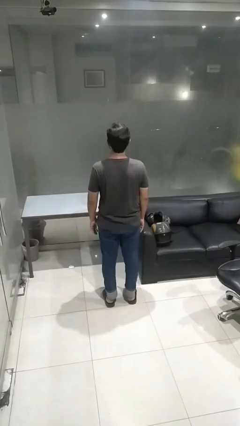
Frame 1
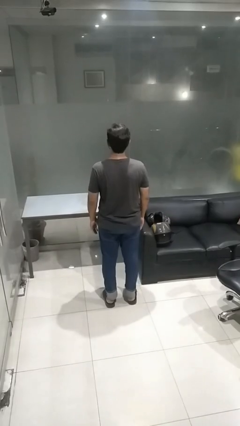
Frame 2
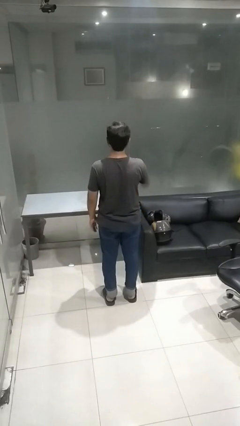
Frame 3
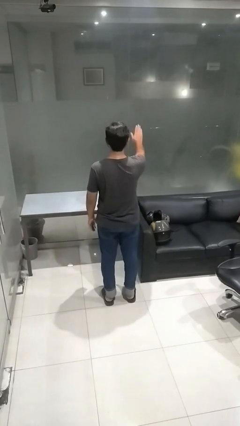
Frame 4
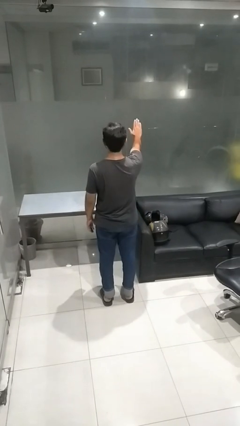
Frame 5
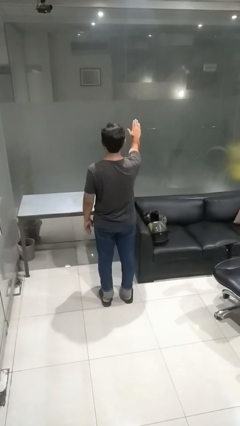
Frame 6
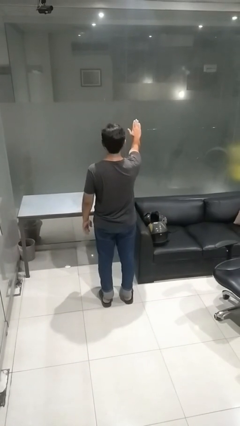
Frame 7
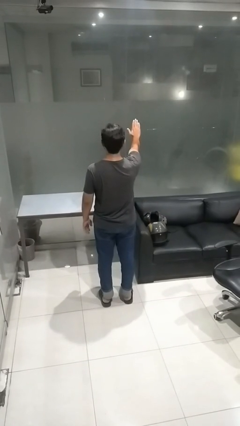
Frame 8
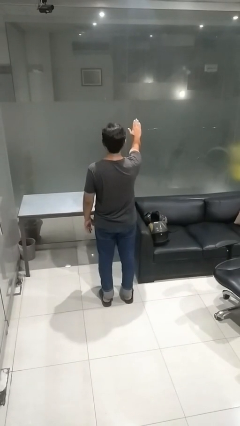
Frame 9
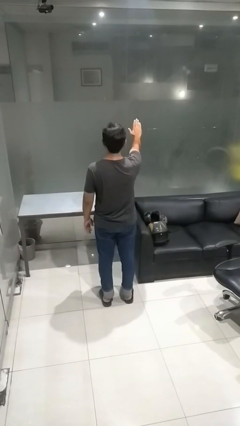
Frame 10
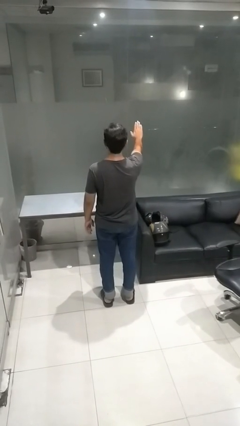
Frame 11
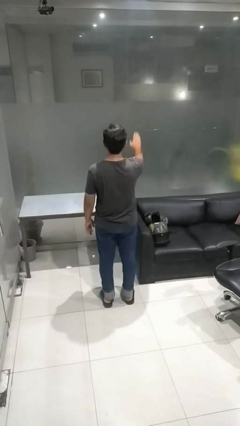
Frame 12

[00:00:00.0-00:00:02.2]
person gestures stop

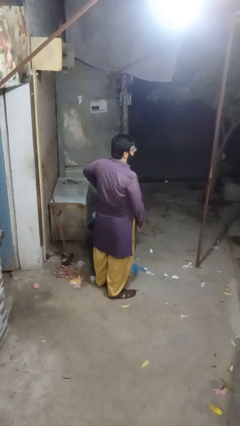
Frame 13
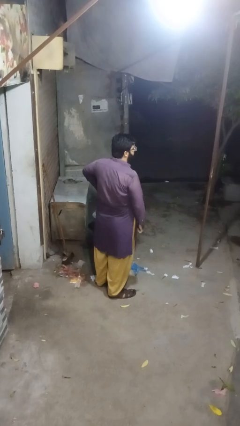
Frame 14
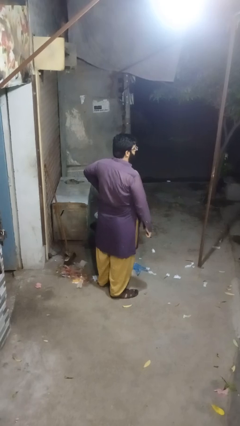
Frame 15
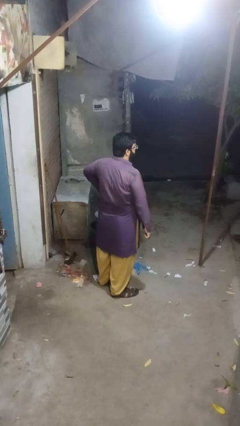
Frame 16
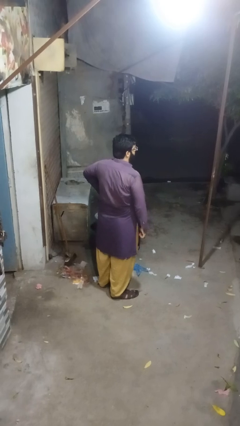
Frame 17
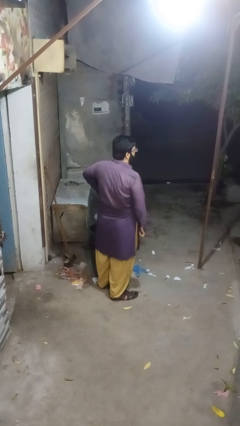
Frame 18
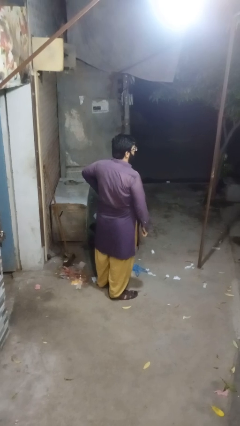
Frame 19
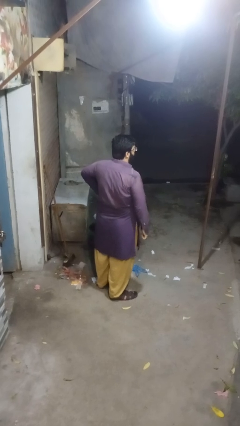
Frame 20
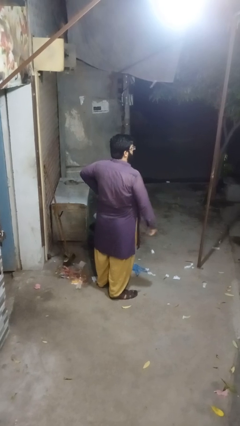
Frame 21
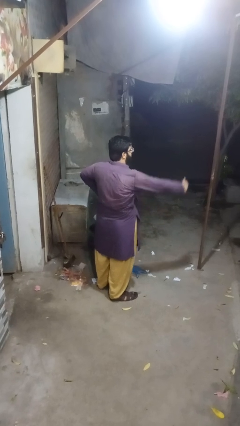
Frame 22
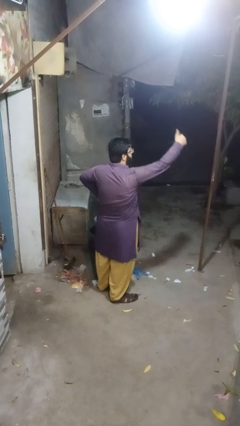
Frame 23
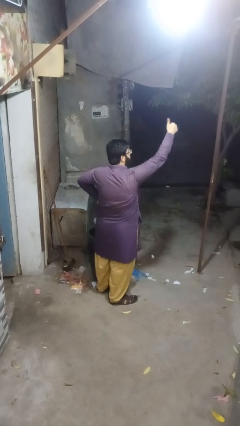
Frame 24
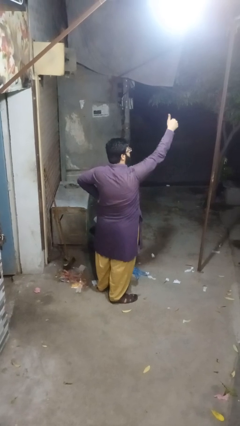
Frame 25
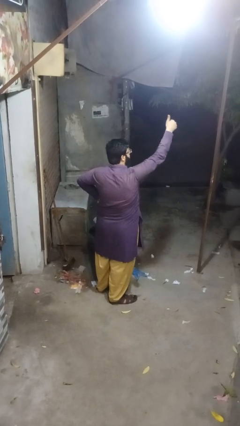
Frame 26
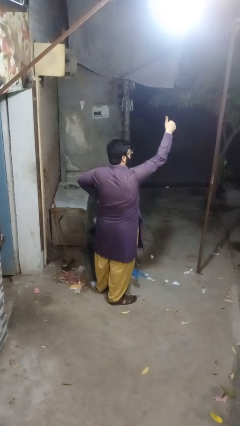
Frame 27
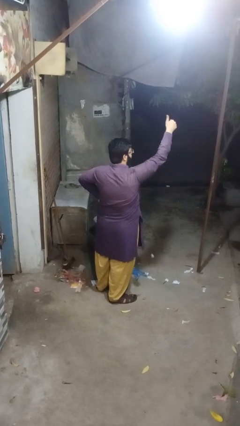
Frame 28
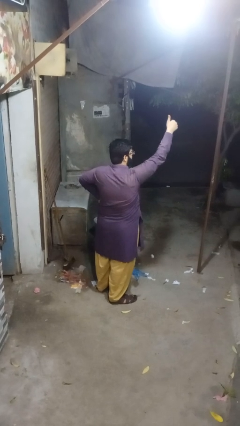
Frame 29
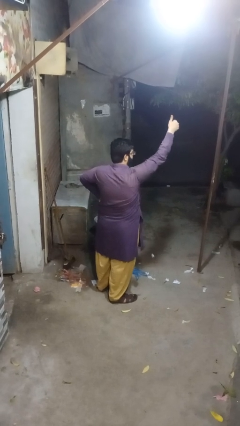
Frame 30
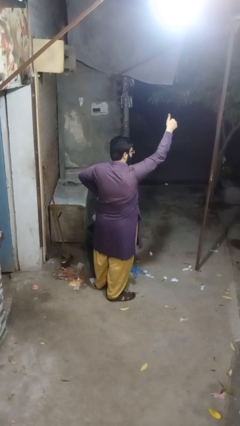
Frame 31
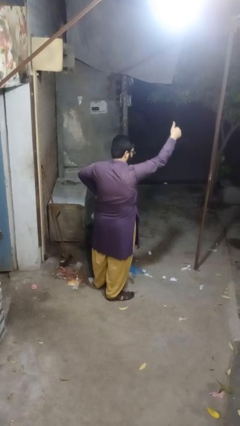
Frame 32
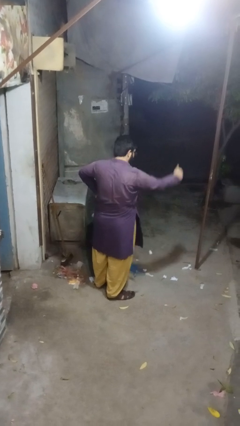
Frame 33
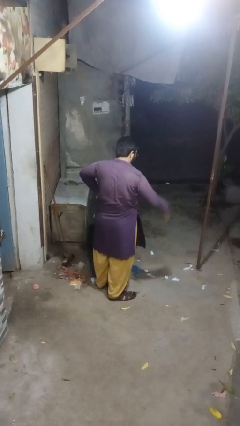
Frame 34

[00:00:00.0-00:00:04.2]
person gestures thumbs up

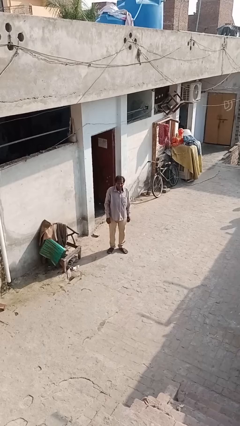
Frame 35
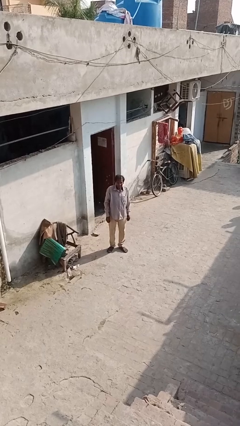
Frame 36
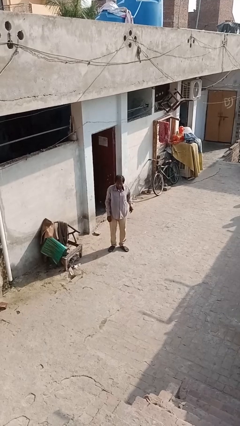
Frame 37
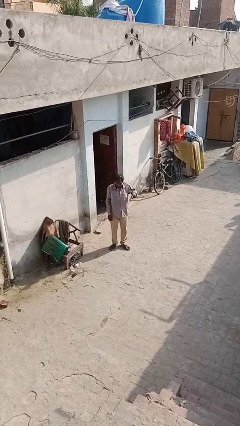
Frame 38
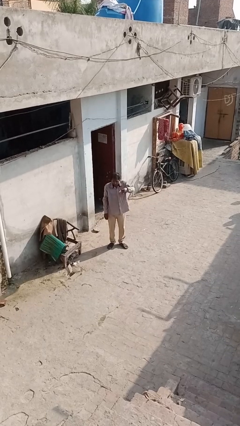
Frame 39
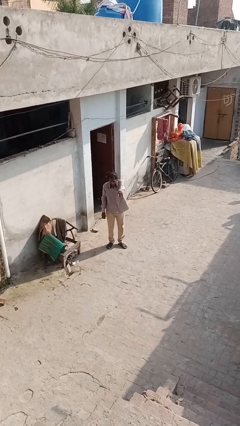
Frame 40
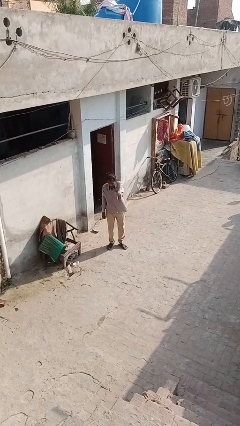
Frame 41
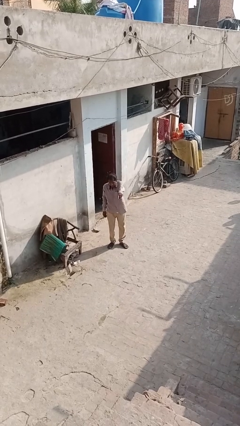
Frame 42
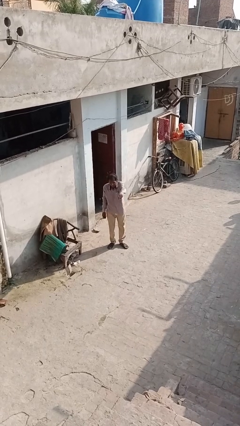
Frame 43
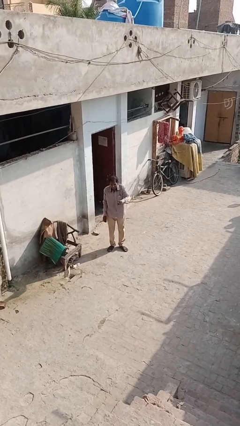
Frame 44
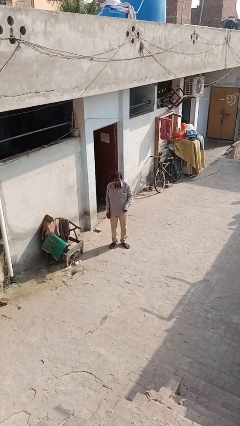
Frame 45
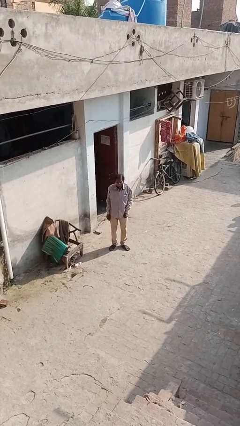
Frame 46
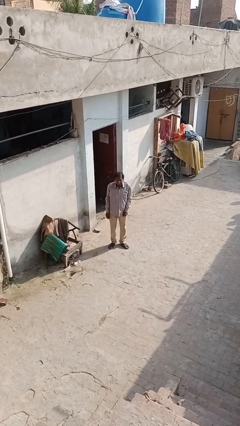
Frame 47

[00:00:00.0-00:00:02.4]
person points at person

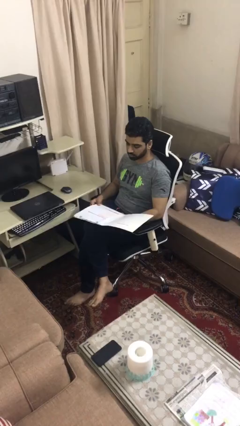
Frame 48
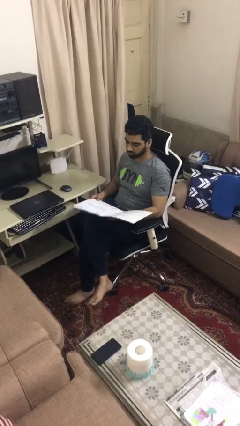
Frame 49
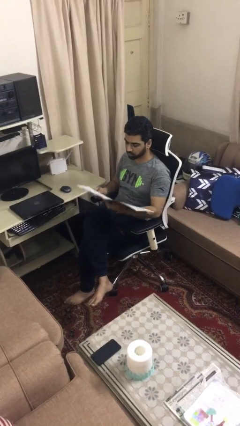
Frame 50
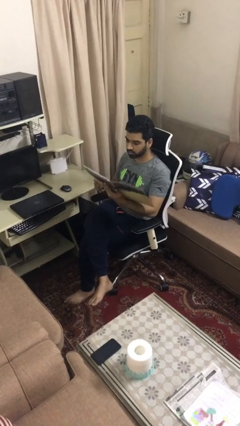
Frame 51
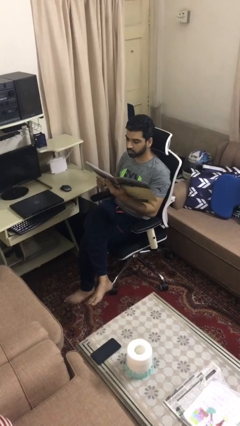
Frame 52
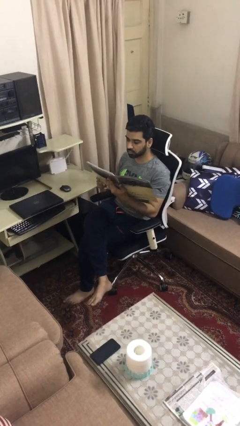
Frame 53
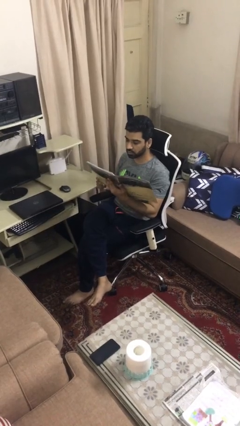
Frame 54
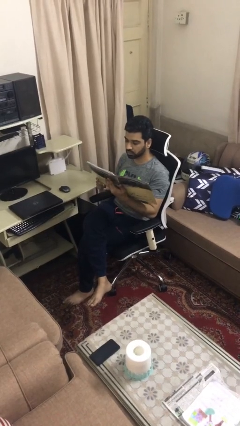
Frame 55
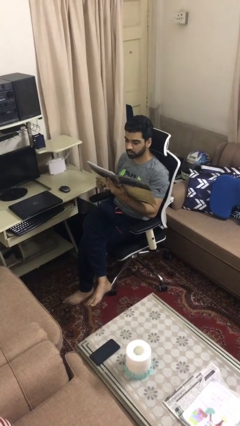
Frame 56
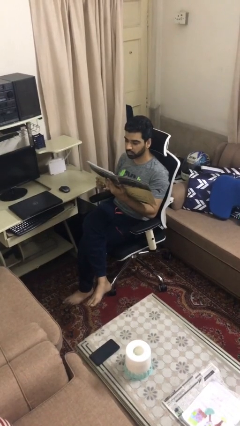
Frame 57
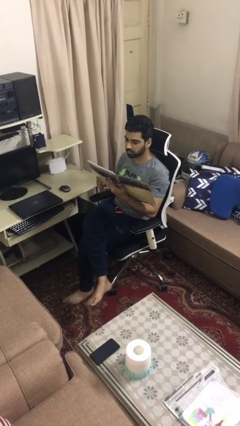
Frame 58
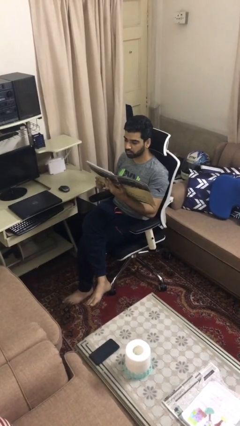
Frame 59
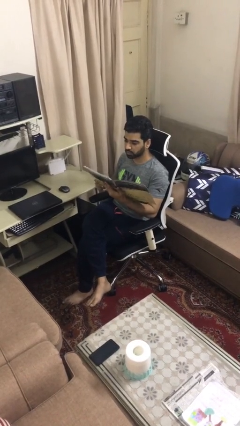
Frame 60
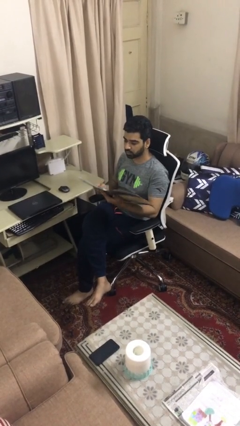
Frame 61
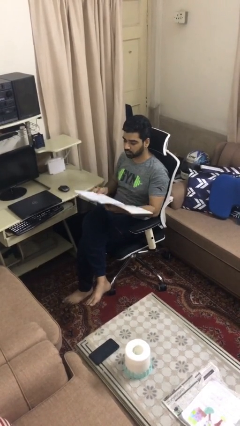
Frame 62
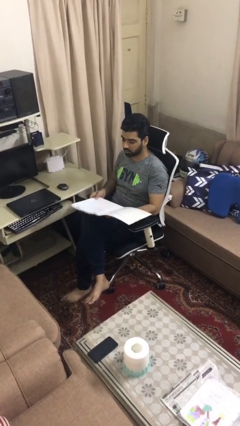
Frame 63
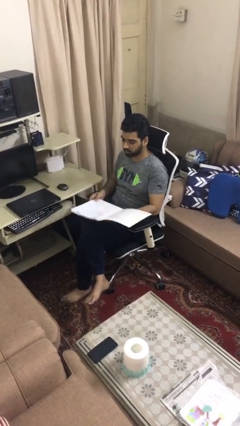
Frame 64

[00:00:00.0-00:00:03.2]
person reads document

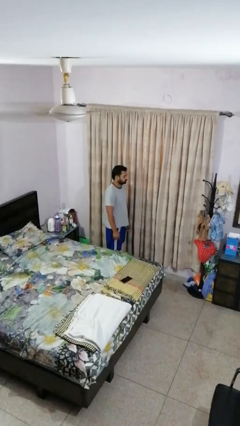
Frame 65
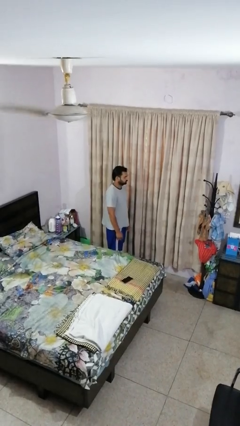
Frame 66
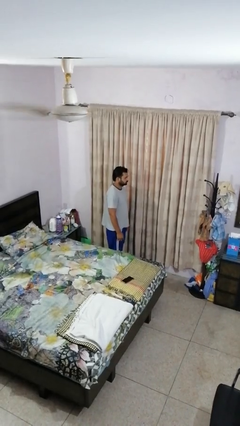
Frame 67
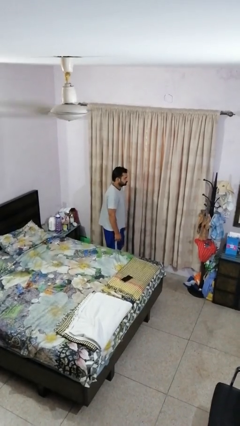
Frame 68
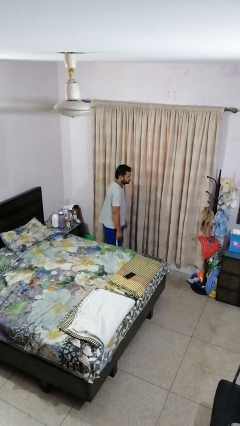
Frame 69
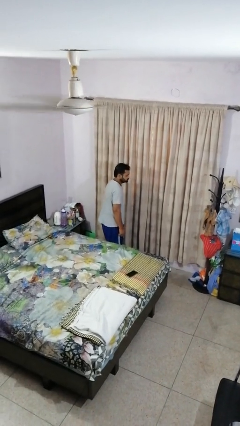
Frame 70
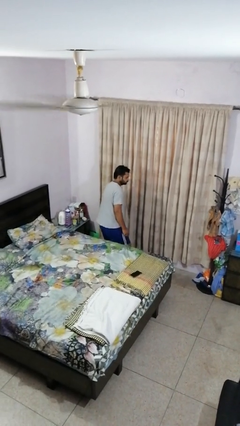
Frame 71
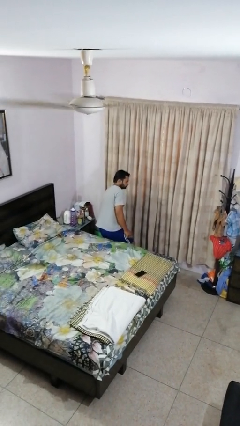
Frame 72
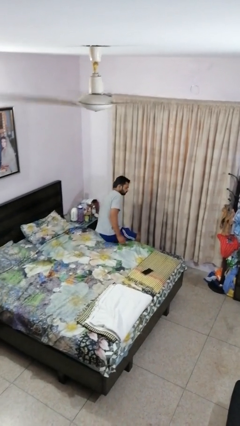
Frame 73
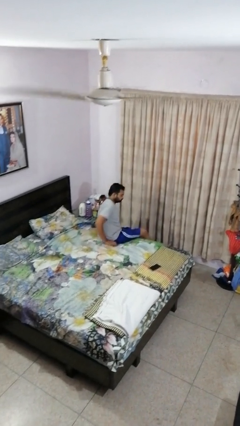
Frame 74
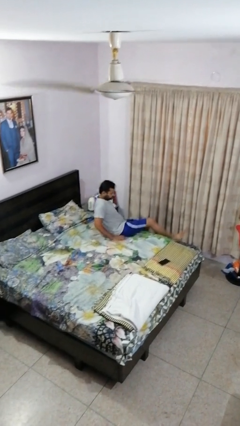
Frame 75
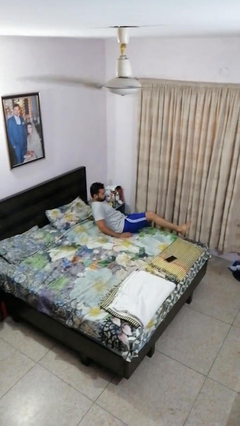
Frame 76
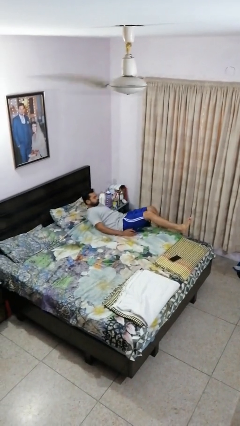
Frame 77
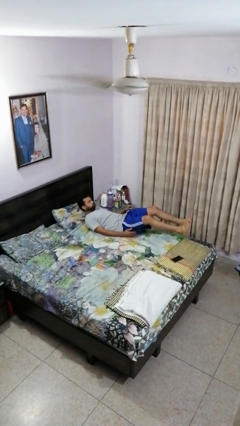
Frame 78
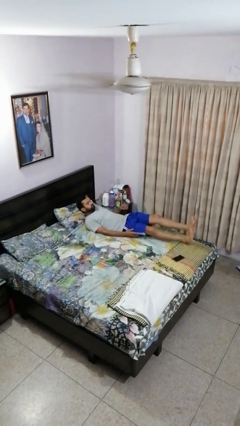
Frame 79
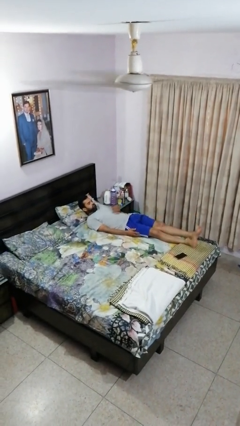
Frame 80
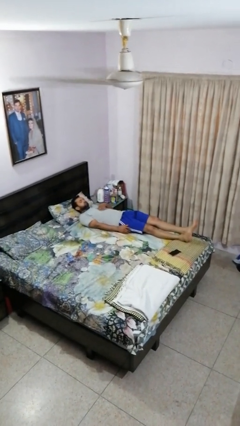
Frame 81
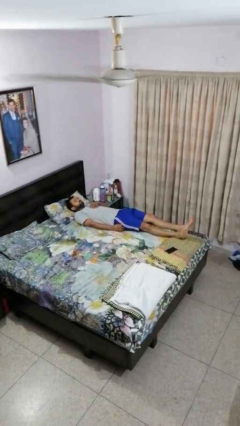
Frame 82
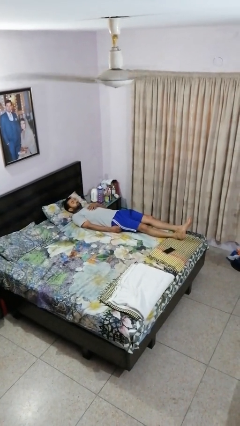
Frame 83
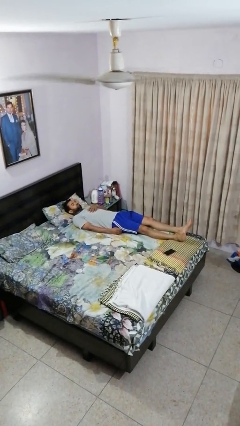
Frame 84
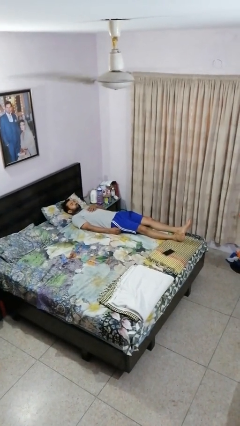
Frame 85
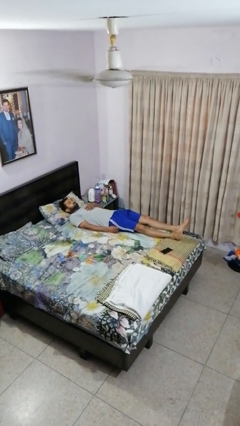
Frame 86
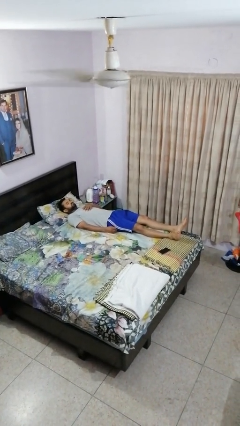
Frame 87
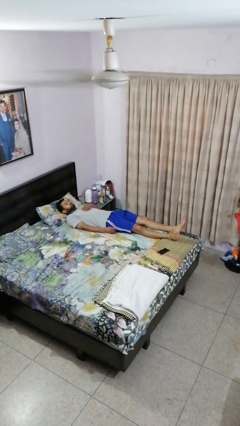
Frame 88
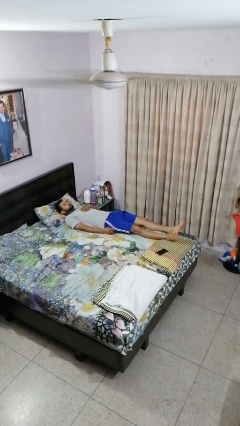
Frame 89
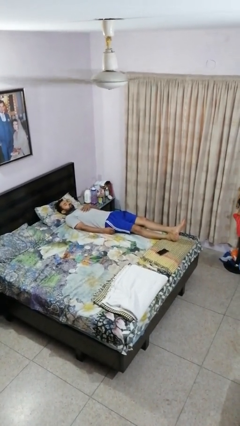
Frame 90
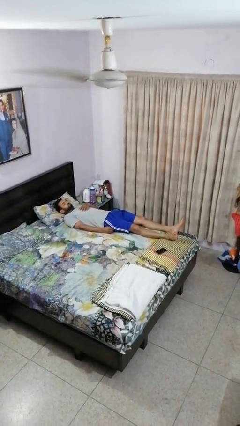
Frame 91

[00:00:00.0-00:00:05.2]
person lies down on bed

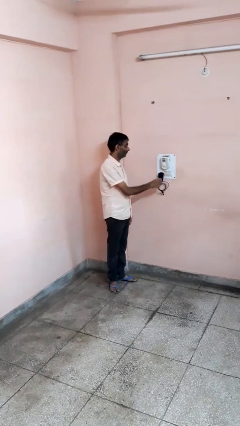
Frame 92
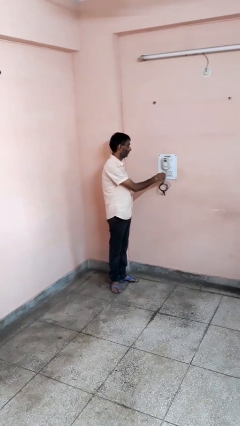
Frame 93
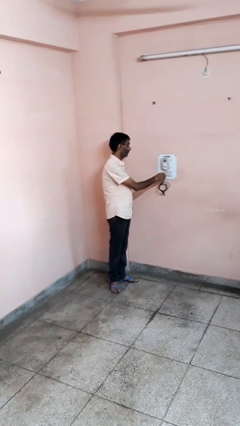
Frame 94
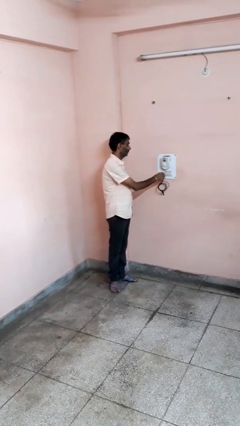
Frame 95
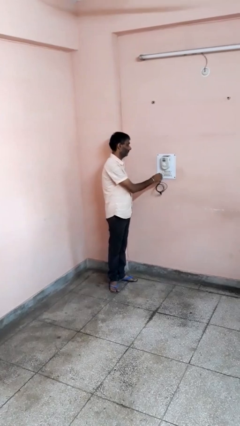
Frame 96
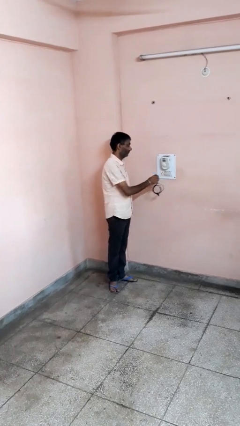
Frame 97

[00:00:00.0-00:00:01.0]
person unplugs from electrical socket
